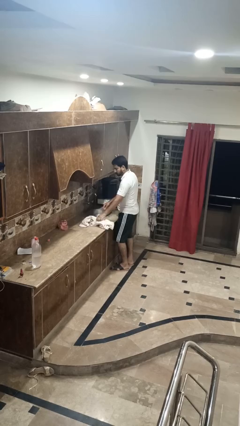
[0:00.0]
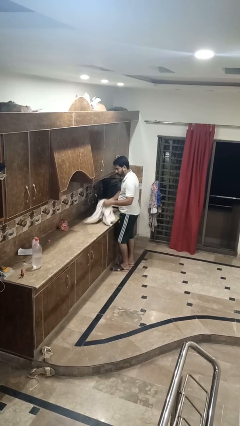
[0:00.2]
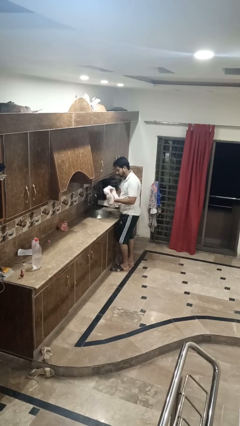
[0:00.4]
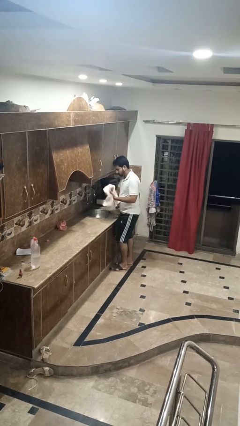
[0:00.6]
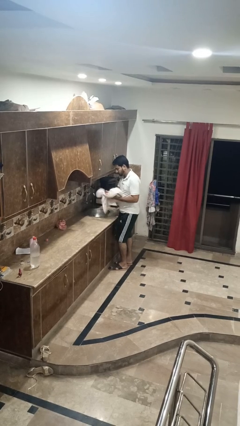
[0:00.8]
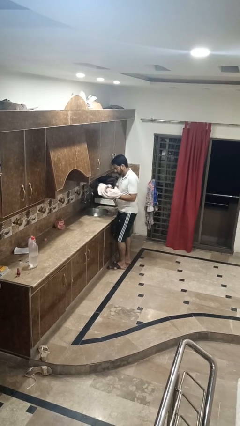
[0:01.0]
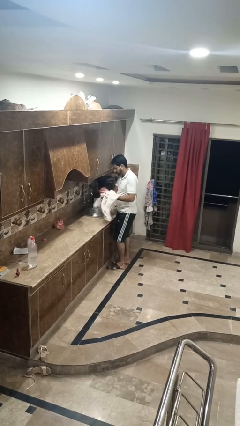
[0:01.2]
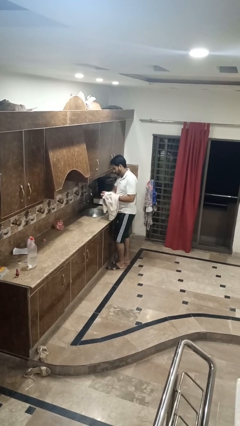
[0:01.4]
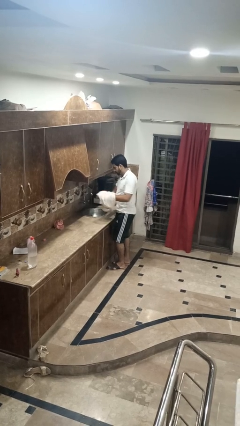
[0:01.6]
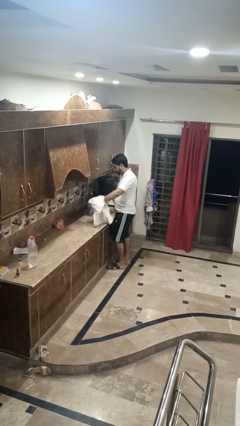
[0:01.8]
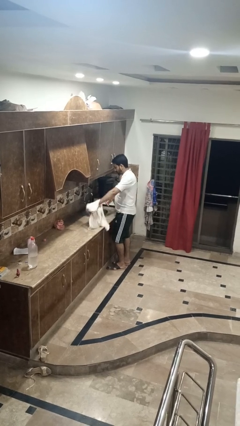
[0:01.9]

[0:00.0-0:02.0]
person dries hands with towel

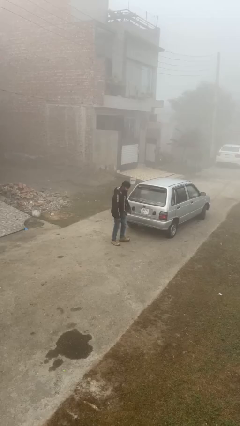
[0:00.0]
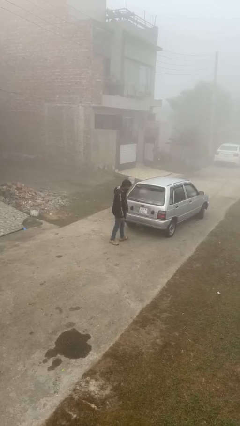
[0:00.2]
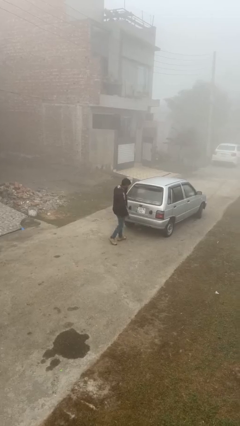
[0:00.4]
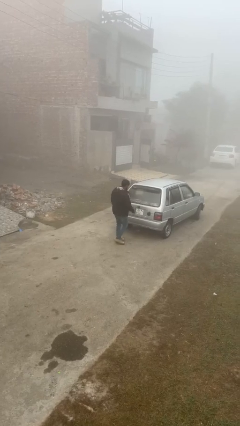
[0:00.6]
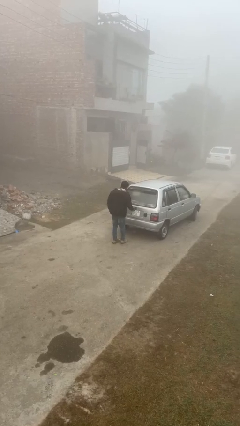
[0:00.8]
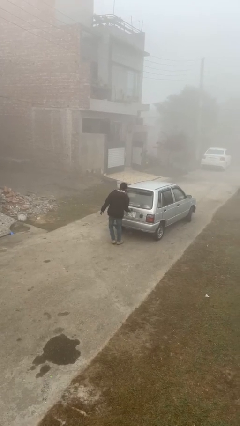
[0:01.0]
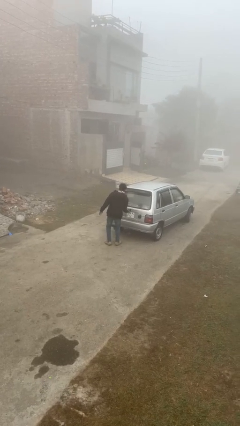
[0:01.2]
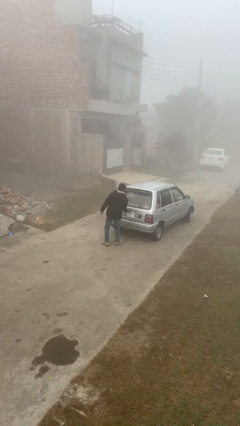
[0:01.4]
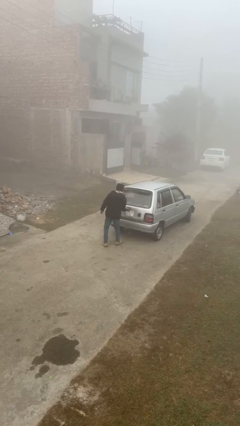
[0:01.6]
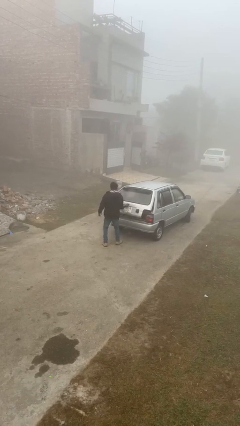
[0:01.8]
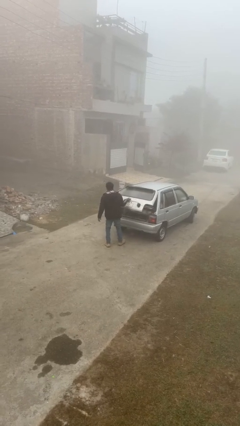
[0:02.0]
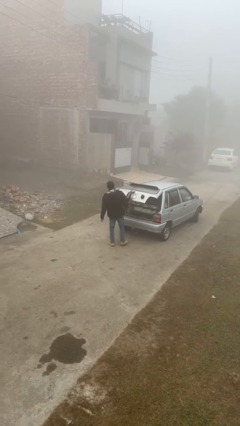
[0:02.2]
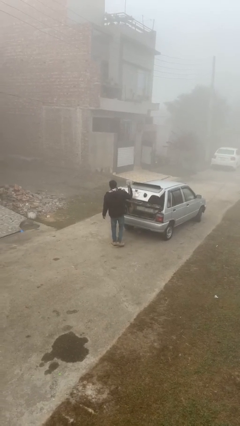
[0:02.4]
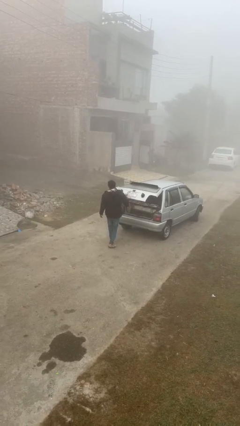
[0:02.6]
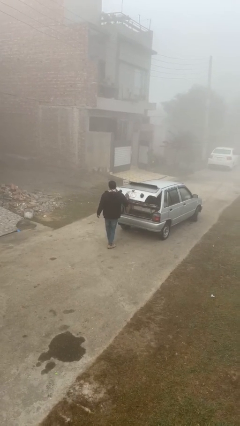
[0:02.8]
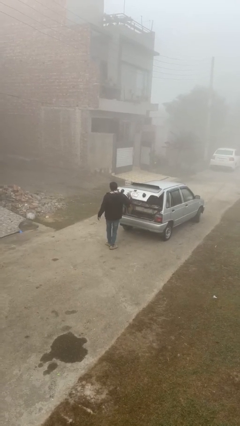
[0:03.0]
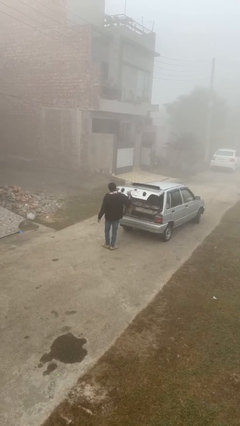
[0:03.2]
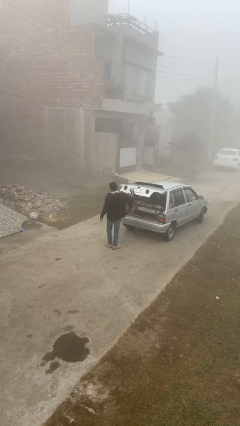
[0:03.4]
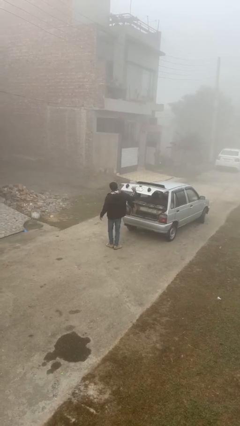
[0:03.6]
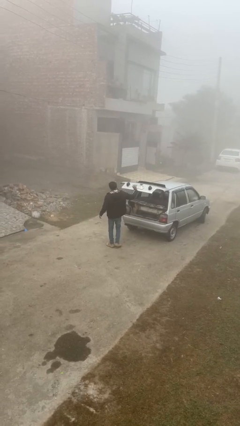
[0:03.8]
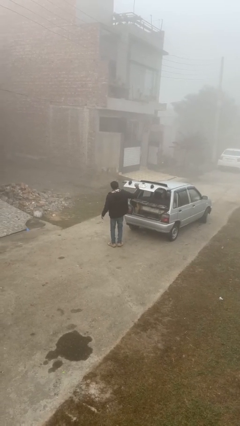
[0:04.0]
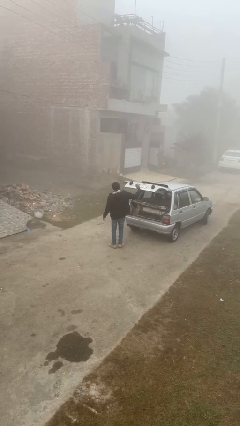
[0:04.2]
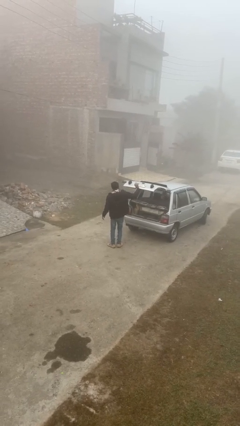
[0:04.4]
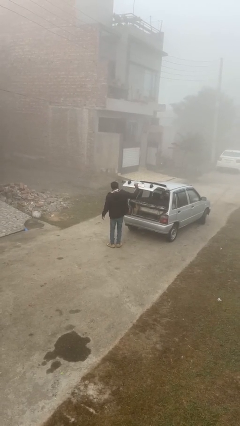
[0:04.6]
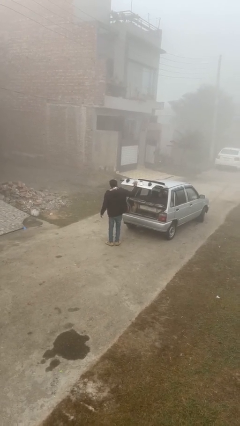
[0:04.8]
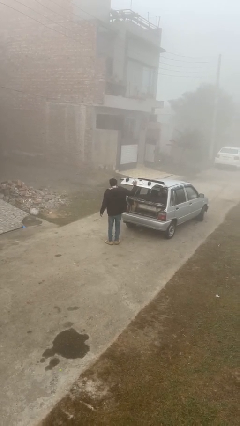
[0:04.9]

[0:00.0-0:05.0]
person opens car trunk

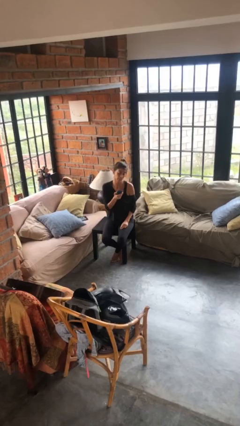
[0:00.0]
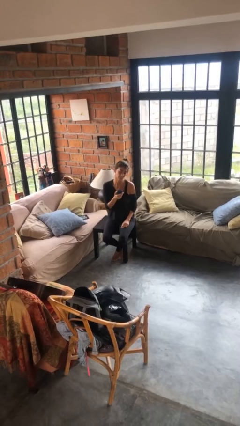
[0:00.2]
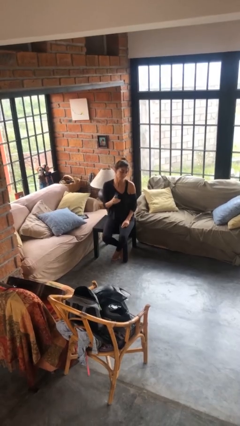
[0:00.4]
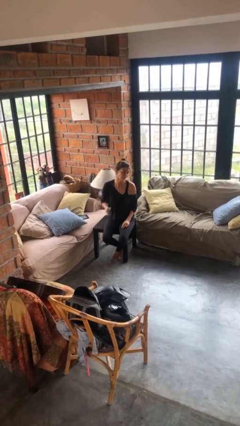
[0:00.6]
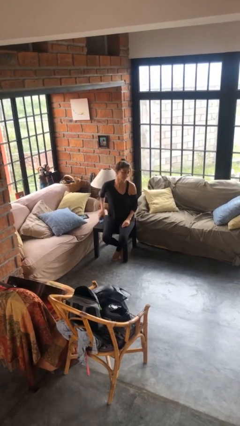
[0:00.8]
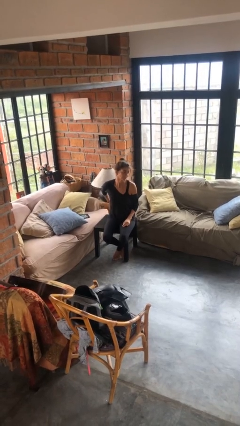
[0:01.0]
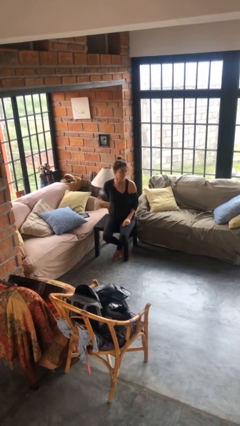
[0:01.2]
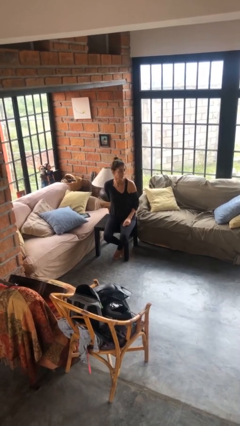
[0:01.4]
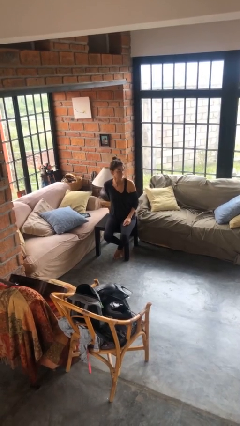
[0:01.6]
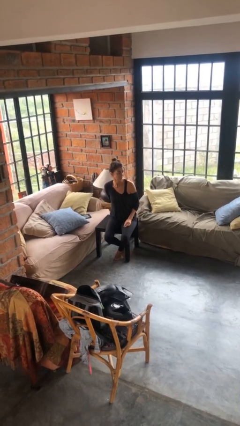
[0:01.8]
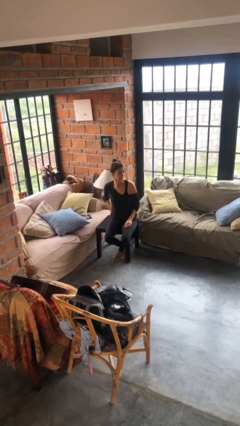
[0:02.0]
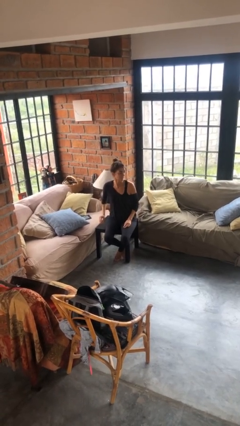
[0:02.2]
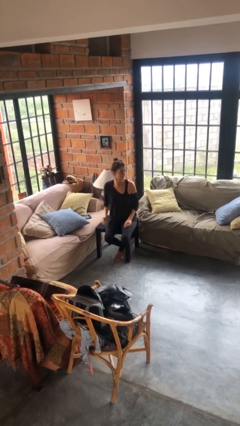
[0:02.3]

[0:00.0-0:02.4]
person puts phone into pocket

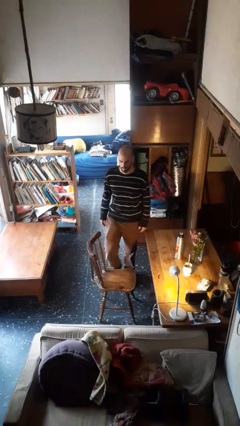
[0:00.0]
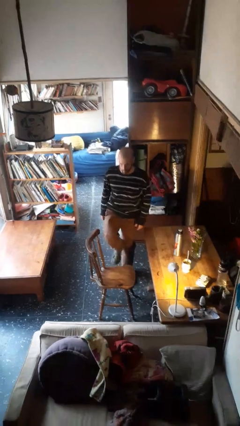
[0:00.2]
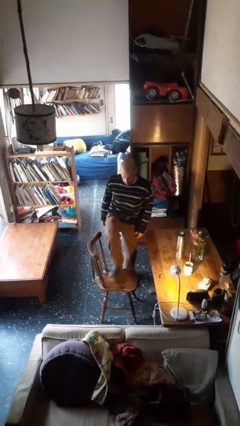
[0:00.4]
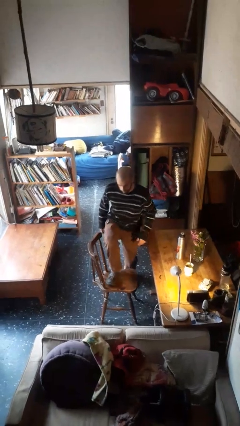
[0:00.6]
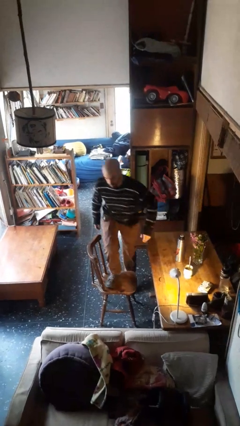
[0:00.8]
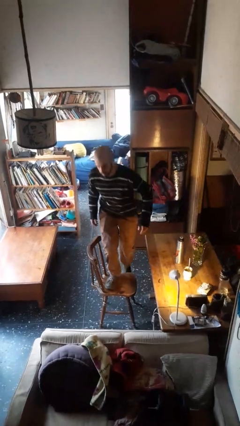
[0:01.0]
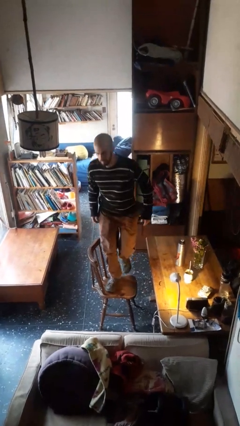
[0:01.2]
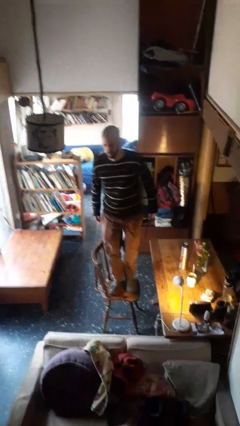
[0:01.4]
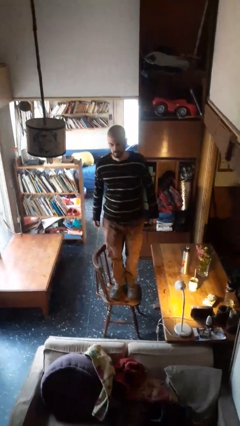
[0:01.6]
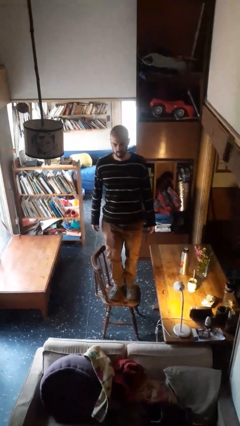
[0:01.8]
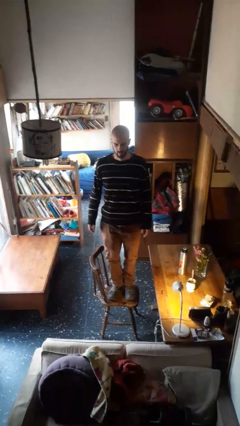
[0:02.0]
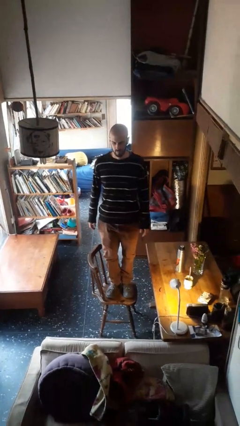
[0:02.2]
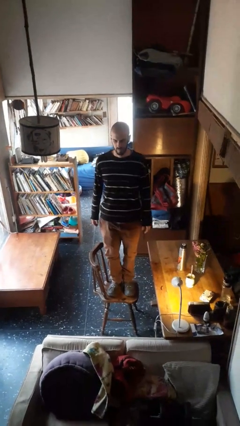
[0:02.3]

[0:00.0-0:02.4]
person climbs on chair

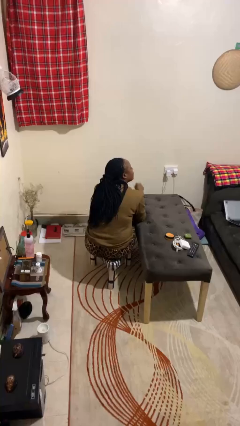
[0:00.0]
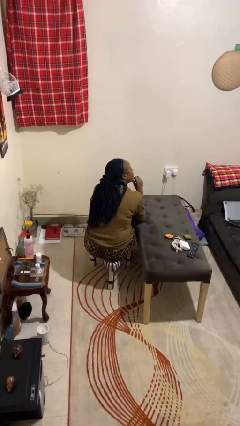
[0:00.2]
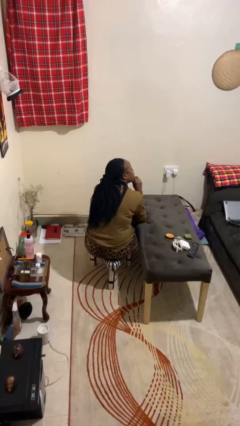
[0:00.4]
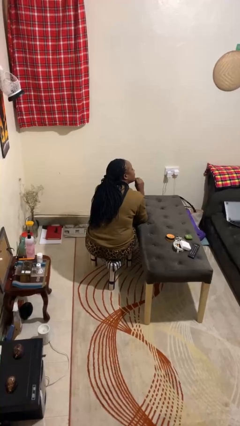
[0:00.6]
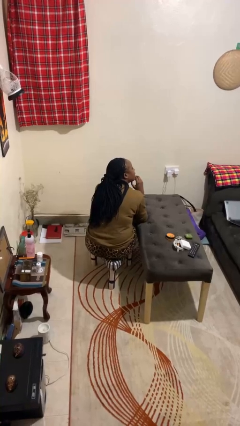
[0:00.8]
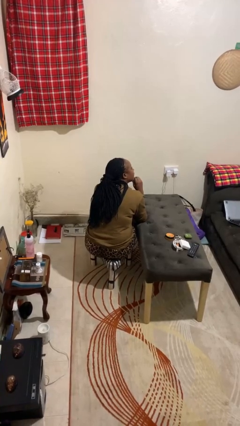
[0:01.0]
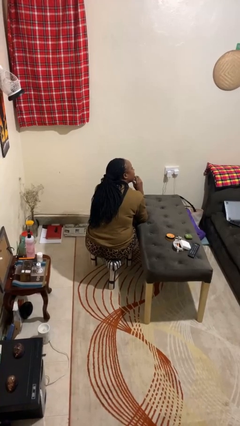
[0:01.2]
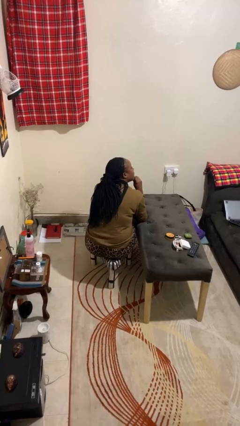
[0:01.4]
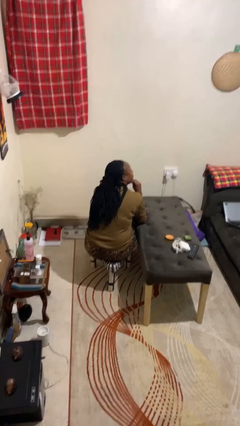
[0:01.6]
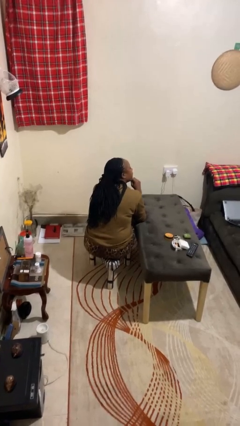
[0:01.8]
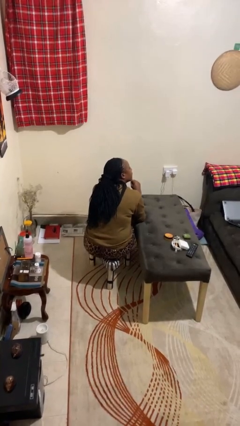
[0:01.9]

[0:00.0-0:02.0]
person strokes chin

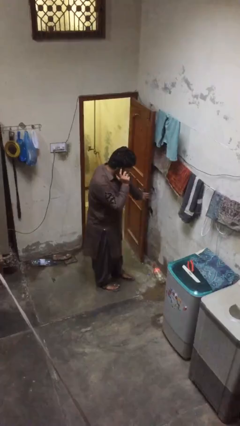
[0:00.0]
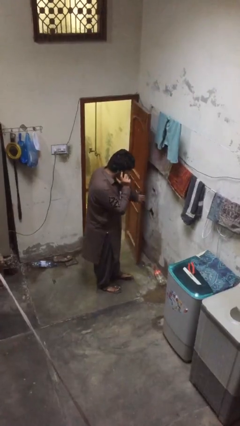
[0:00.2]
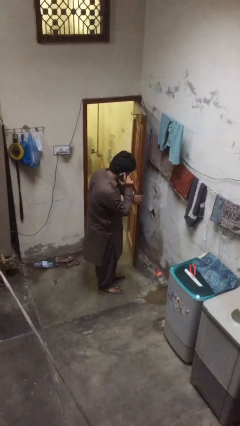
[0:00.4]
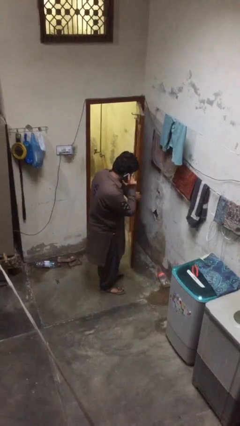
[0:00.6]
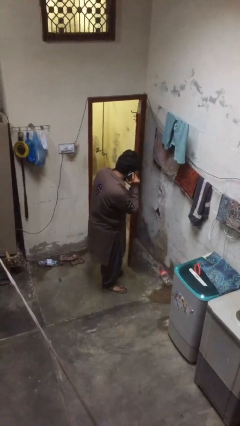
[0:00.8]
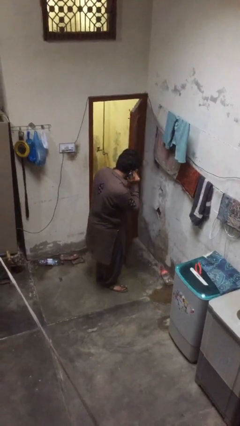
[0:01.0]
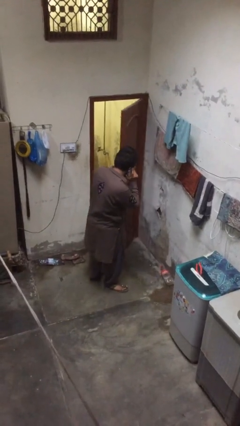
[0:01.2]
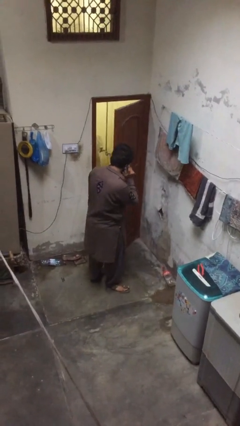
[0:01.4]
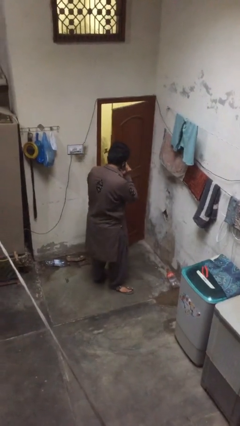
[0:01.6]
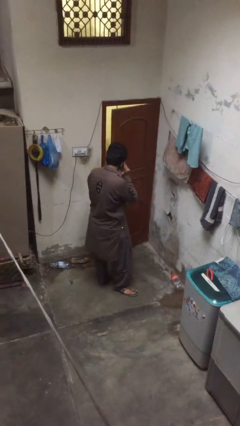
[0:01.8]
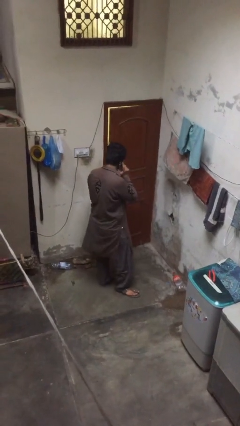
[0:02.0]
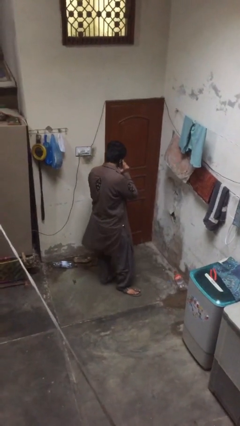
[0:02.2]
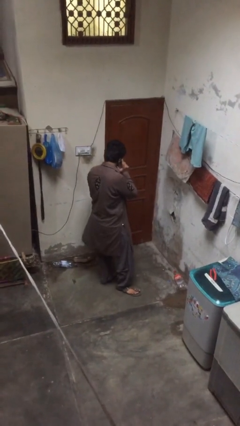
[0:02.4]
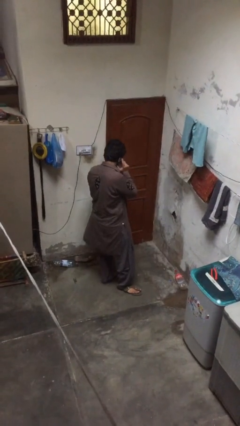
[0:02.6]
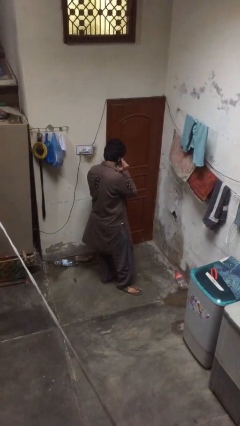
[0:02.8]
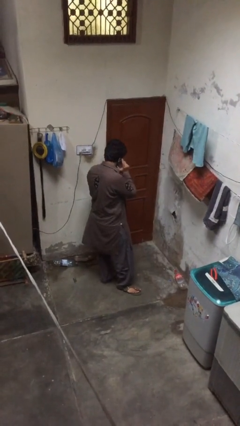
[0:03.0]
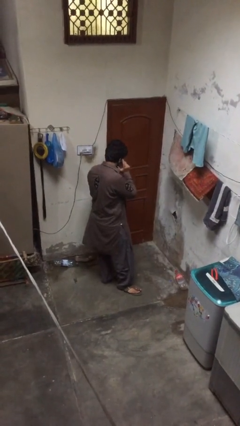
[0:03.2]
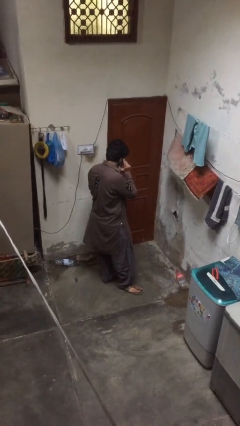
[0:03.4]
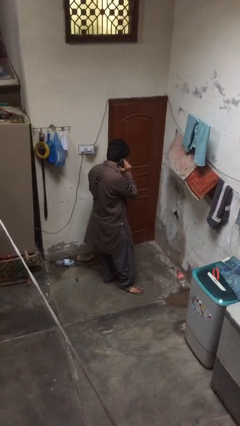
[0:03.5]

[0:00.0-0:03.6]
person closes facility door

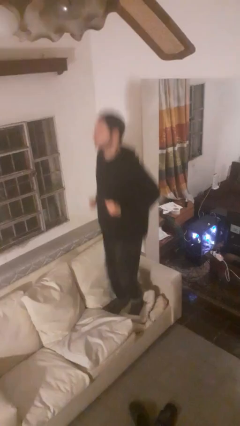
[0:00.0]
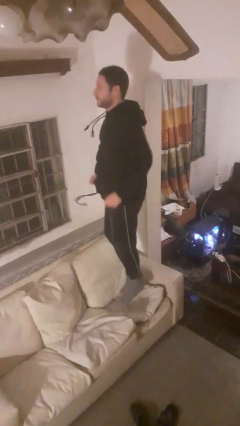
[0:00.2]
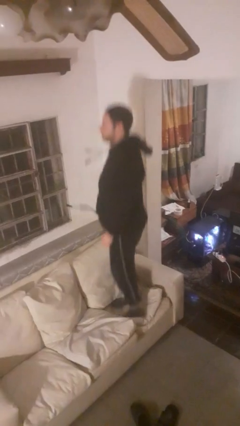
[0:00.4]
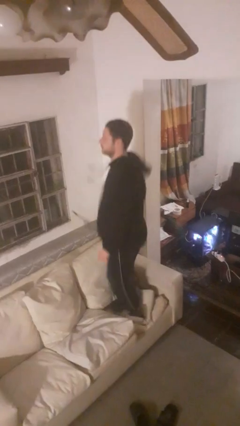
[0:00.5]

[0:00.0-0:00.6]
person jumps on couch
